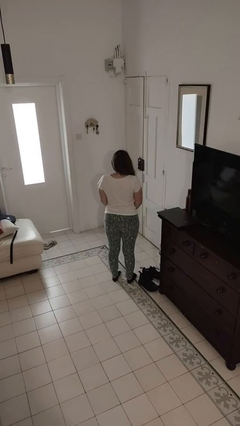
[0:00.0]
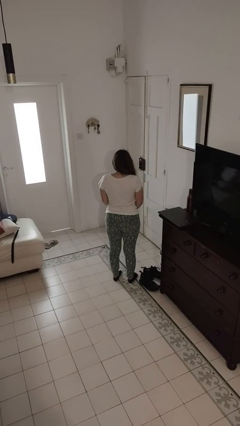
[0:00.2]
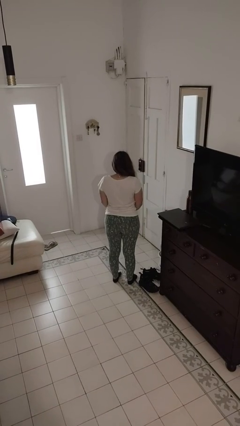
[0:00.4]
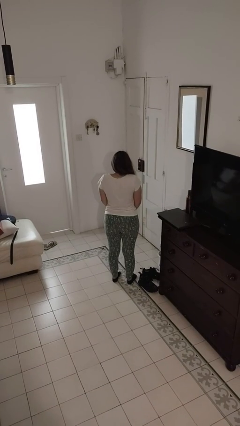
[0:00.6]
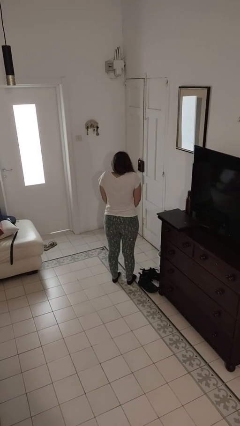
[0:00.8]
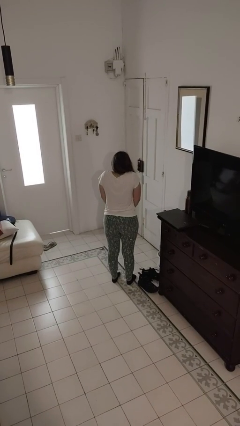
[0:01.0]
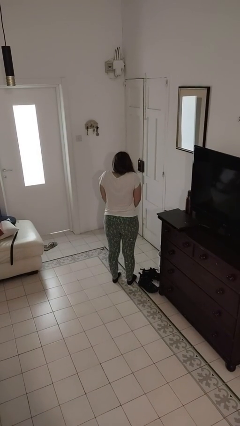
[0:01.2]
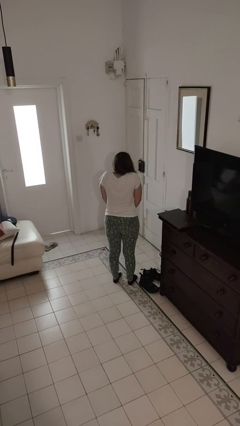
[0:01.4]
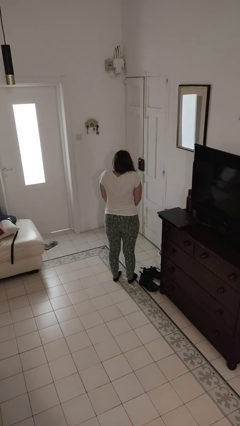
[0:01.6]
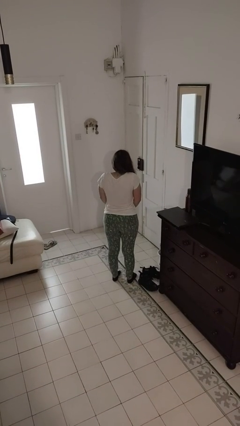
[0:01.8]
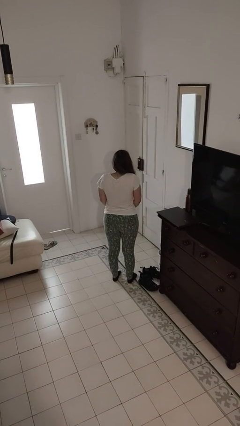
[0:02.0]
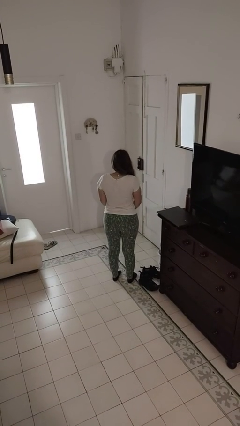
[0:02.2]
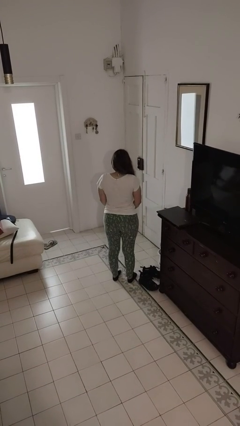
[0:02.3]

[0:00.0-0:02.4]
person shrugs

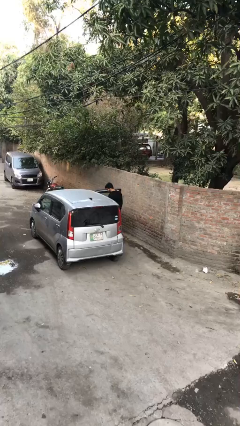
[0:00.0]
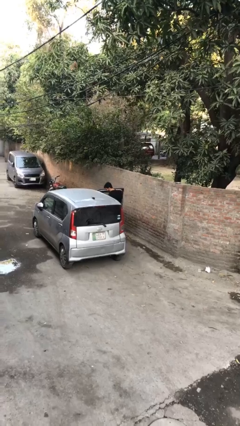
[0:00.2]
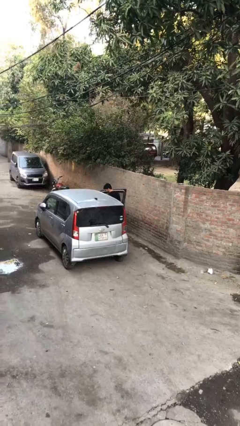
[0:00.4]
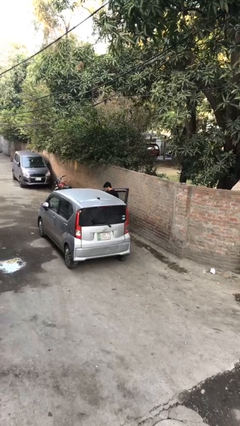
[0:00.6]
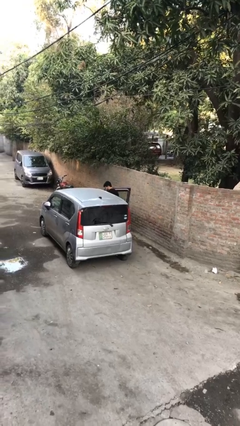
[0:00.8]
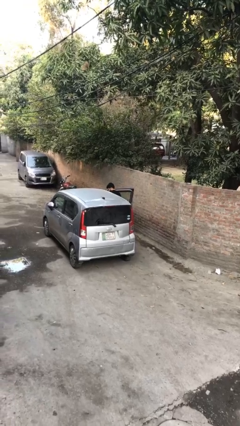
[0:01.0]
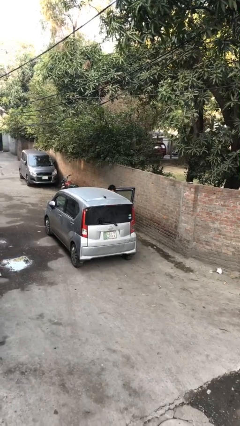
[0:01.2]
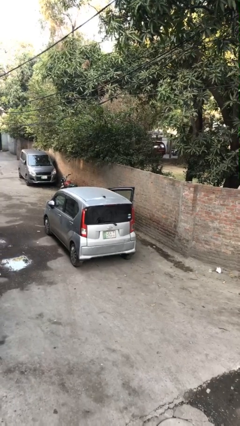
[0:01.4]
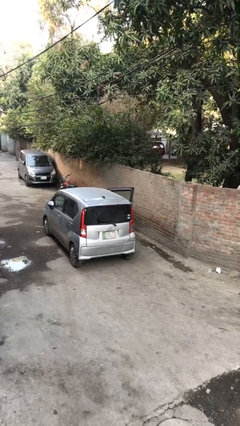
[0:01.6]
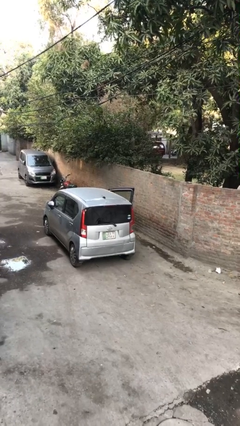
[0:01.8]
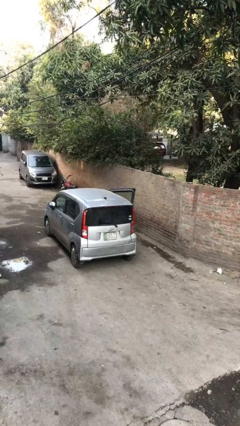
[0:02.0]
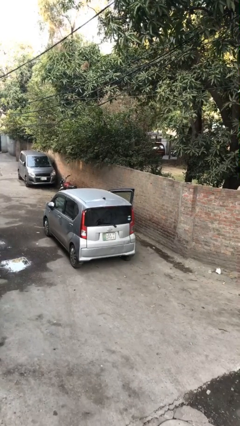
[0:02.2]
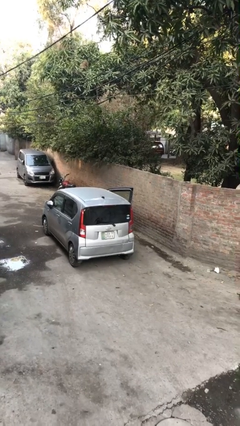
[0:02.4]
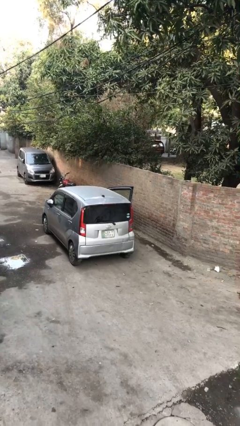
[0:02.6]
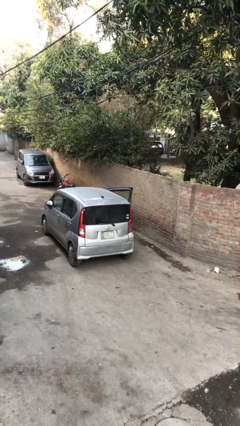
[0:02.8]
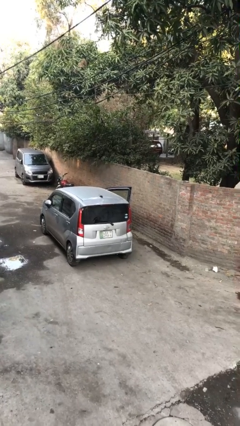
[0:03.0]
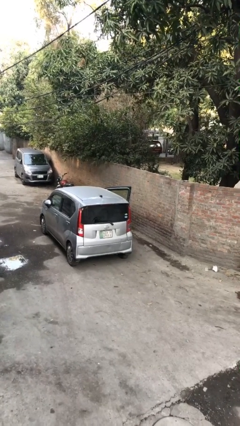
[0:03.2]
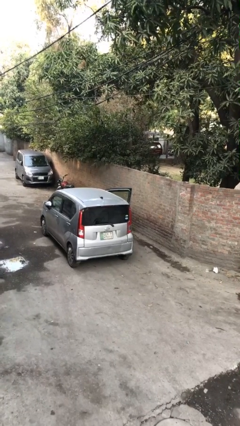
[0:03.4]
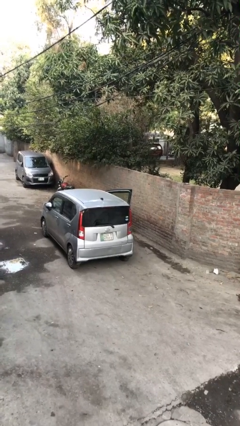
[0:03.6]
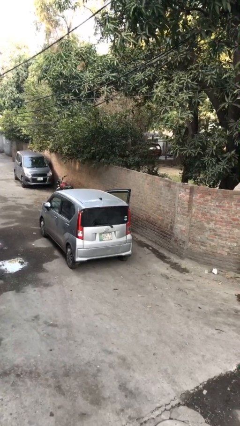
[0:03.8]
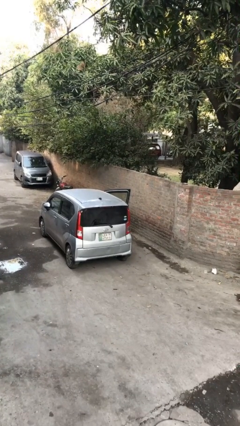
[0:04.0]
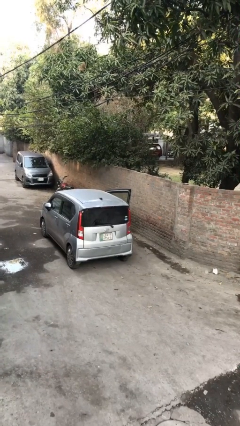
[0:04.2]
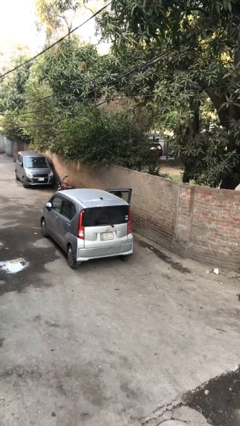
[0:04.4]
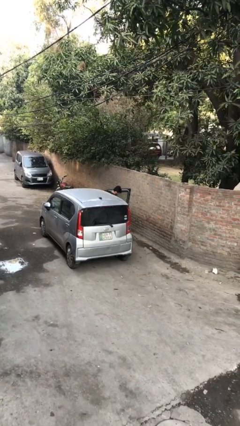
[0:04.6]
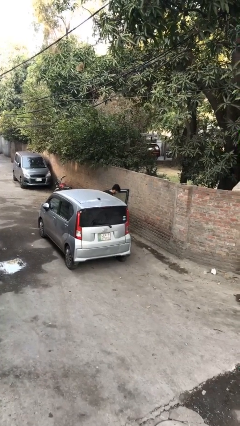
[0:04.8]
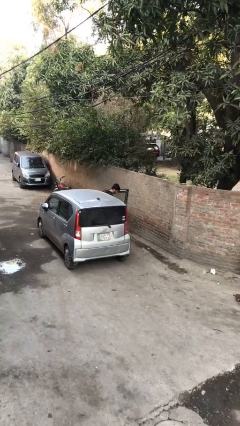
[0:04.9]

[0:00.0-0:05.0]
person enters car

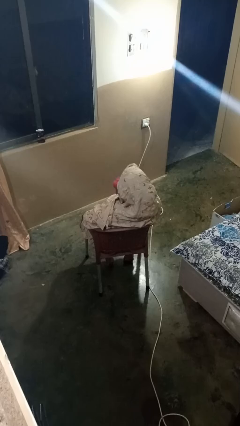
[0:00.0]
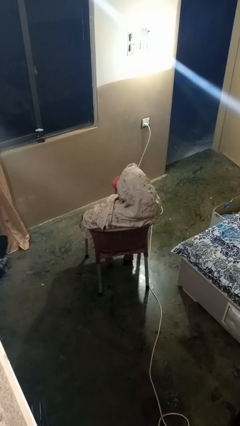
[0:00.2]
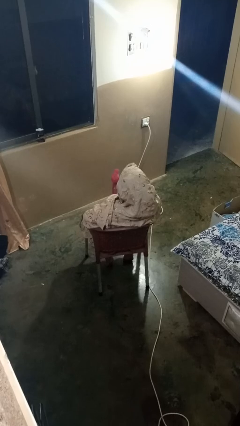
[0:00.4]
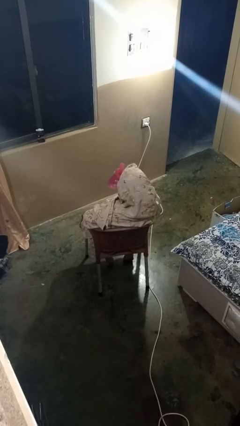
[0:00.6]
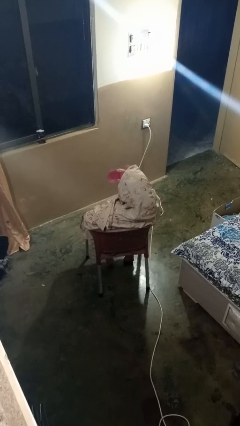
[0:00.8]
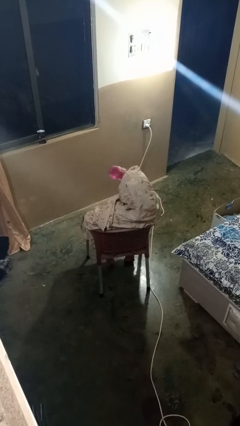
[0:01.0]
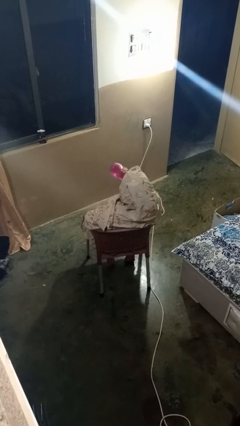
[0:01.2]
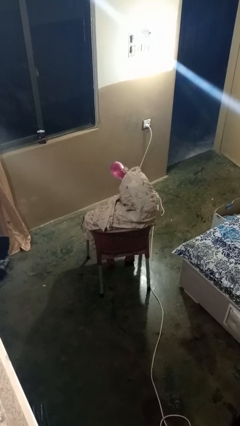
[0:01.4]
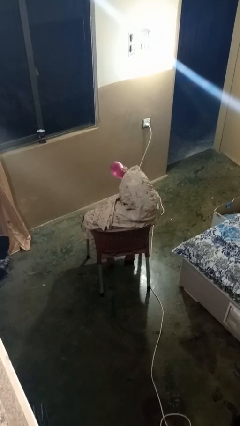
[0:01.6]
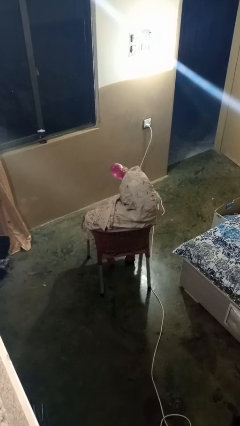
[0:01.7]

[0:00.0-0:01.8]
person drinks from bottle

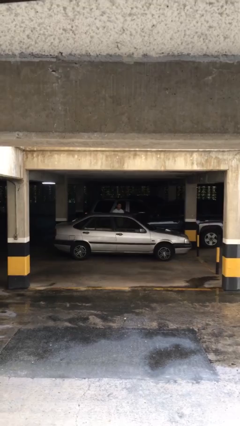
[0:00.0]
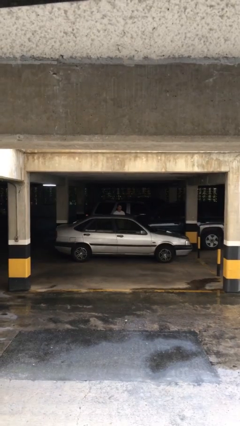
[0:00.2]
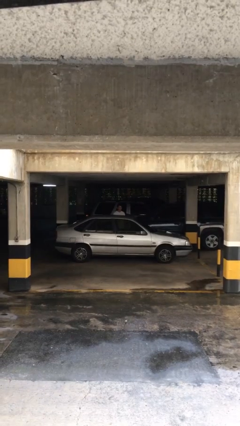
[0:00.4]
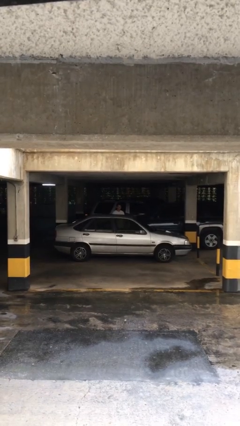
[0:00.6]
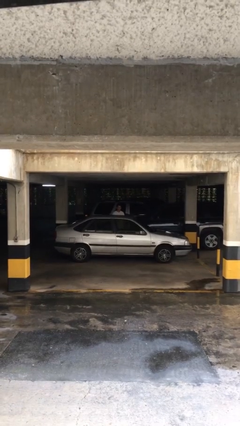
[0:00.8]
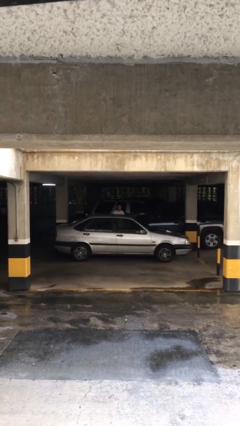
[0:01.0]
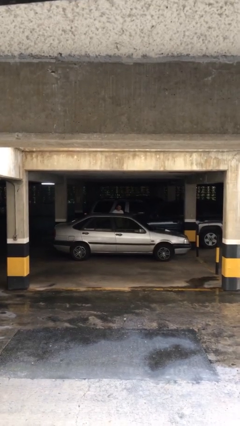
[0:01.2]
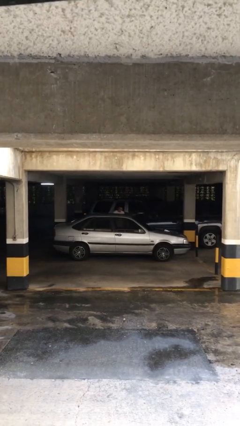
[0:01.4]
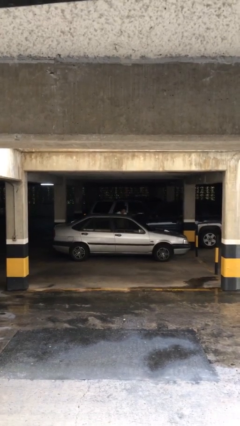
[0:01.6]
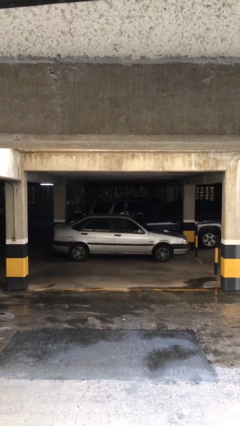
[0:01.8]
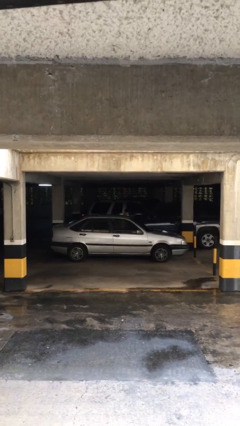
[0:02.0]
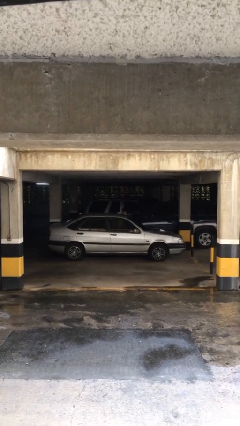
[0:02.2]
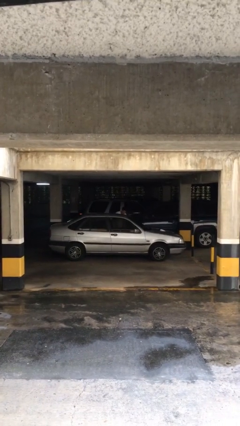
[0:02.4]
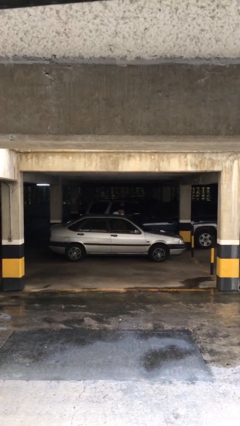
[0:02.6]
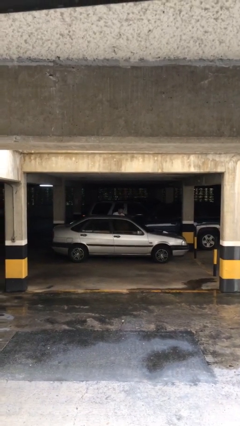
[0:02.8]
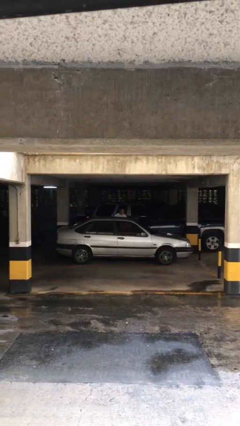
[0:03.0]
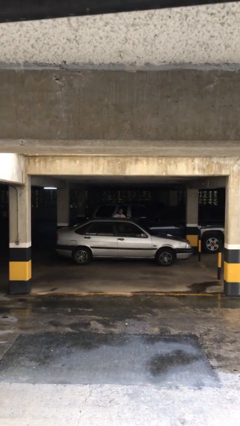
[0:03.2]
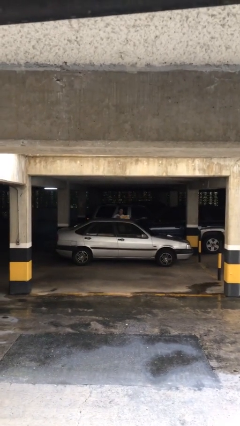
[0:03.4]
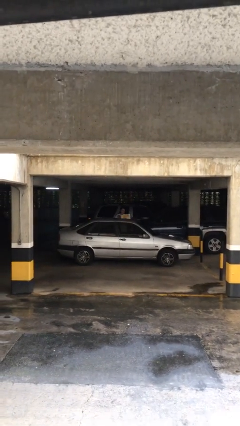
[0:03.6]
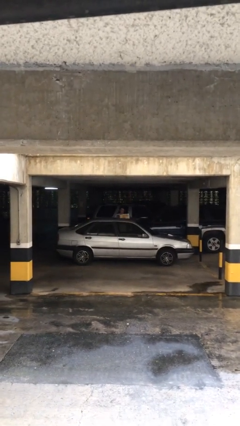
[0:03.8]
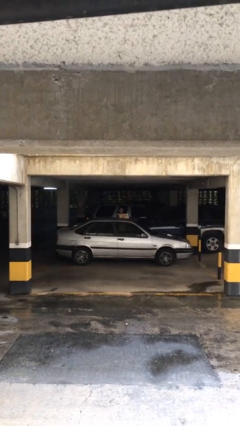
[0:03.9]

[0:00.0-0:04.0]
person unloads car

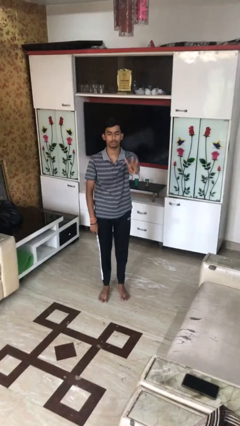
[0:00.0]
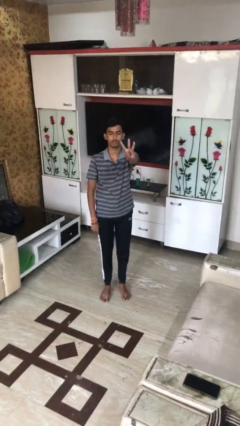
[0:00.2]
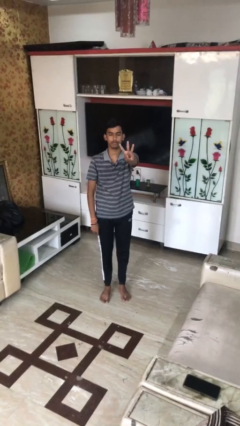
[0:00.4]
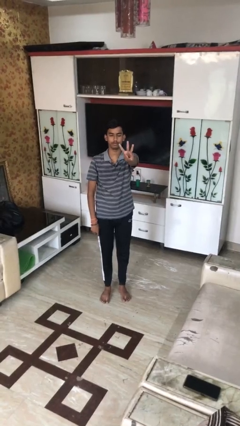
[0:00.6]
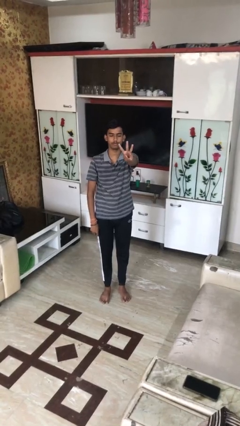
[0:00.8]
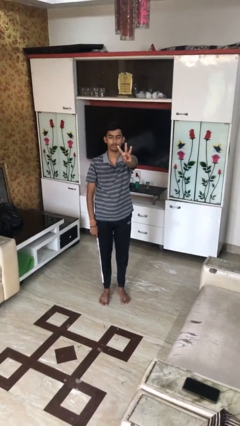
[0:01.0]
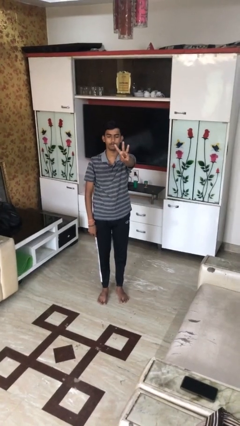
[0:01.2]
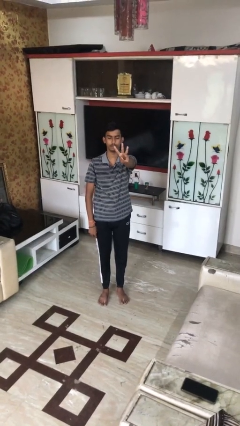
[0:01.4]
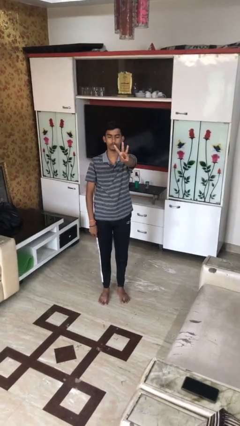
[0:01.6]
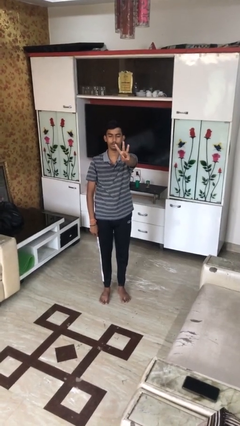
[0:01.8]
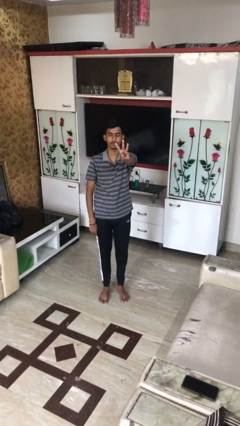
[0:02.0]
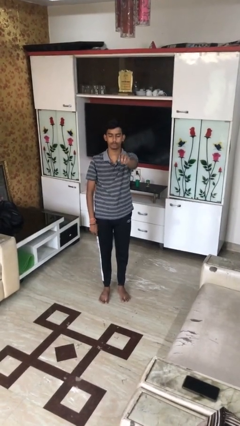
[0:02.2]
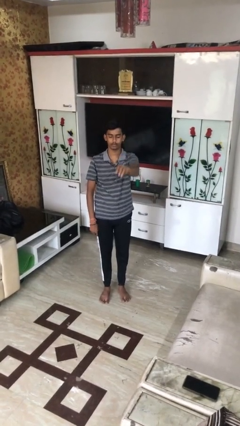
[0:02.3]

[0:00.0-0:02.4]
person gestures number three

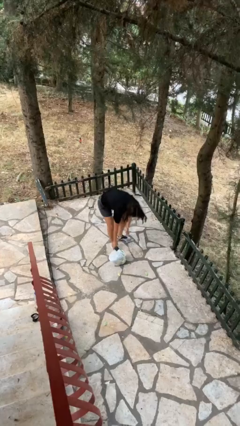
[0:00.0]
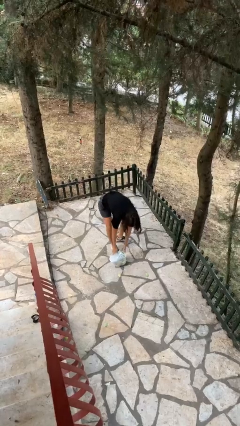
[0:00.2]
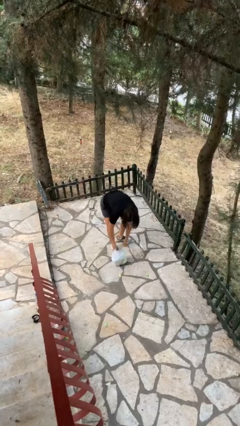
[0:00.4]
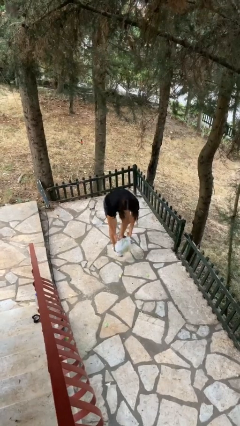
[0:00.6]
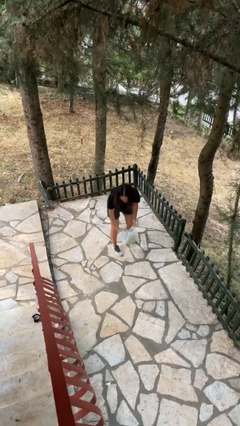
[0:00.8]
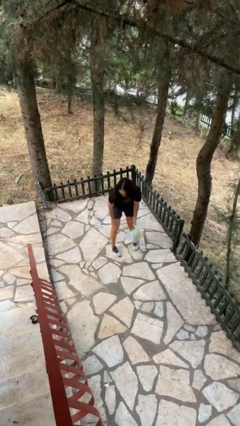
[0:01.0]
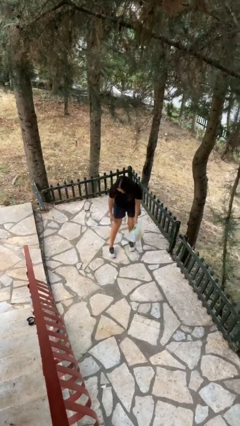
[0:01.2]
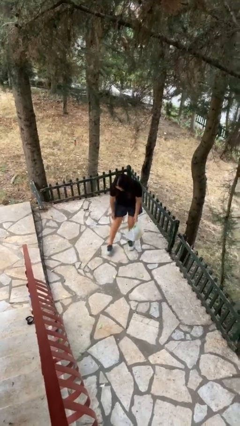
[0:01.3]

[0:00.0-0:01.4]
person picks up object from floor

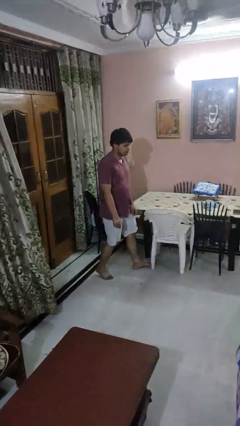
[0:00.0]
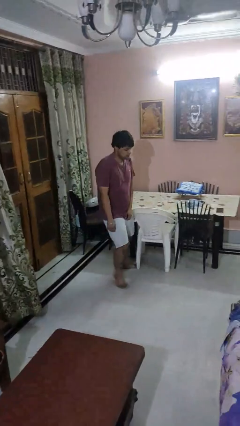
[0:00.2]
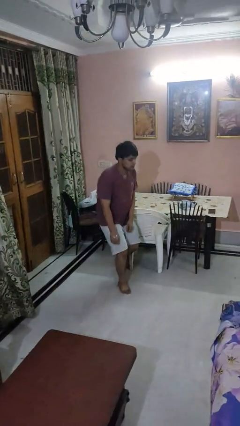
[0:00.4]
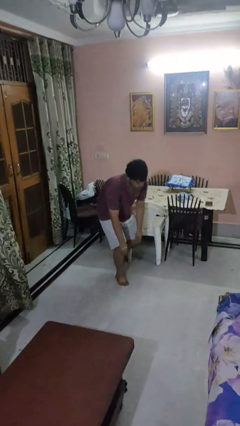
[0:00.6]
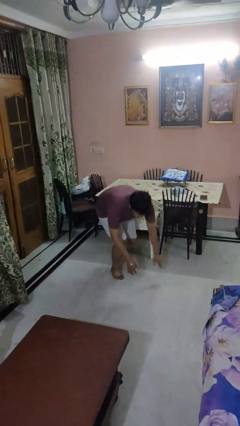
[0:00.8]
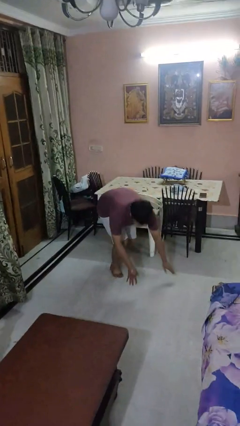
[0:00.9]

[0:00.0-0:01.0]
person trips on object on floor
